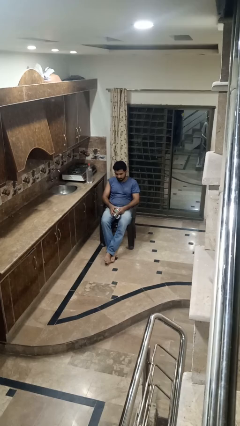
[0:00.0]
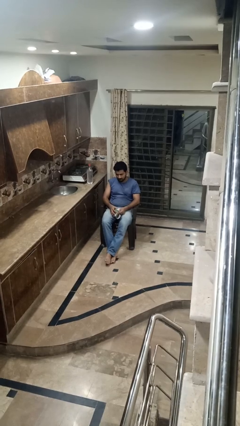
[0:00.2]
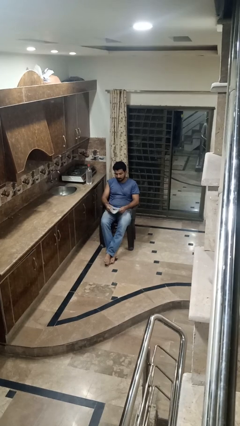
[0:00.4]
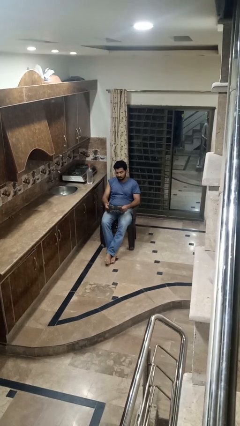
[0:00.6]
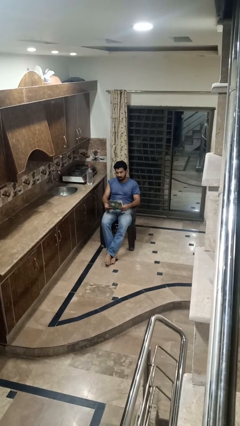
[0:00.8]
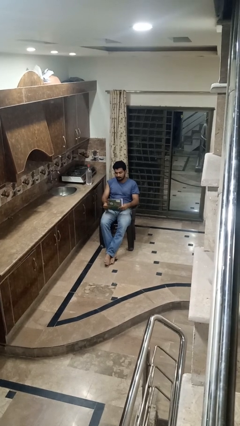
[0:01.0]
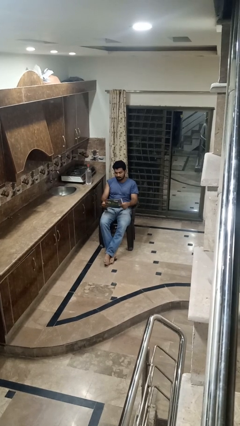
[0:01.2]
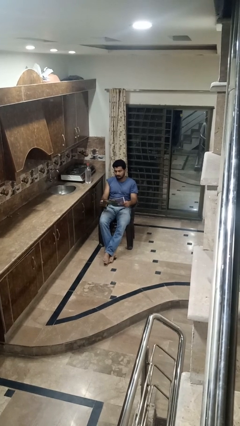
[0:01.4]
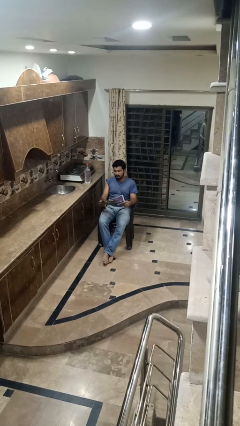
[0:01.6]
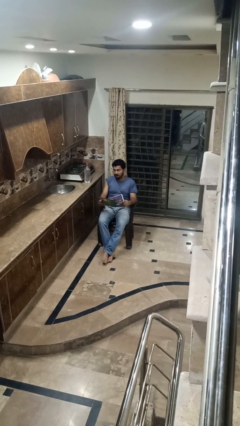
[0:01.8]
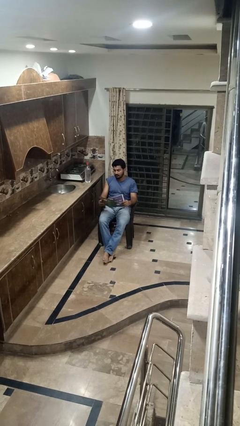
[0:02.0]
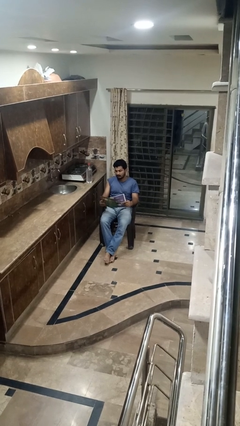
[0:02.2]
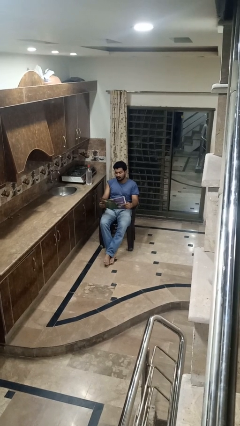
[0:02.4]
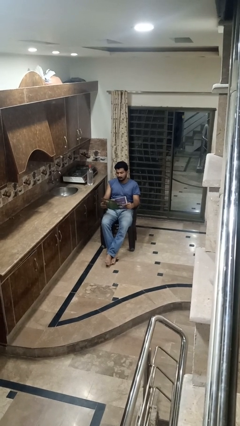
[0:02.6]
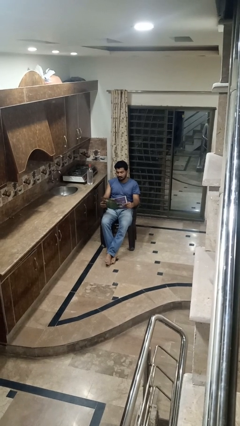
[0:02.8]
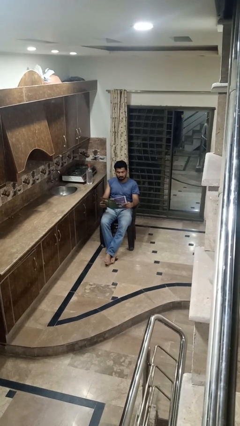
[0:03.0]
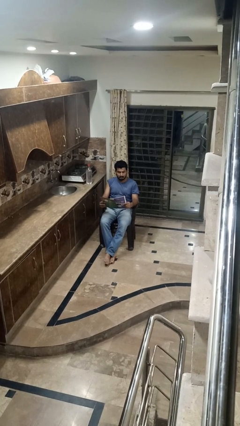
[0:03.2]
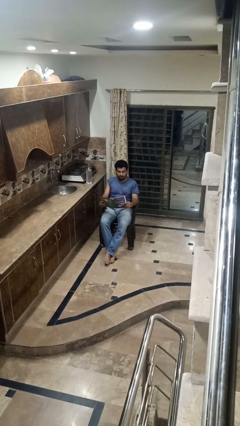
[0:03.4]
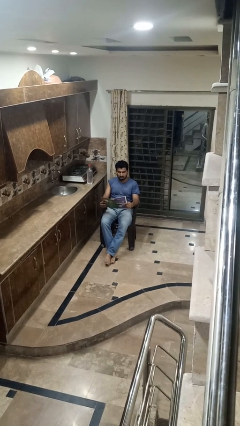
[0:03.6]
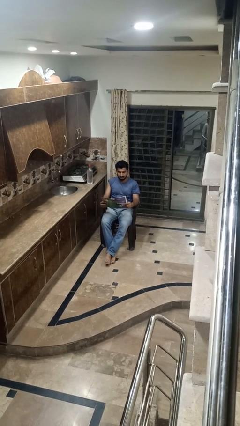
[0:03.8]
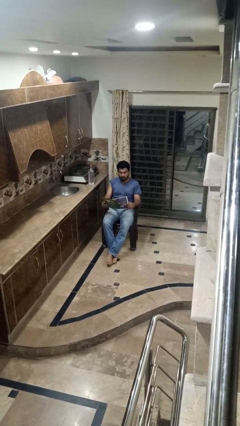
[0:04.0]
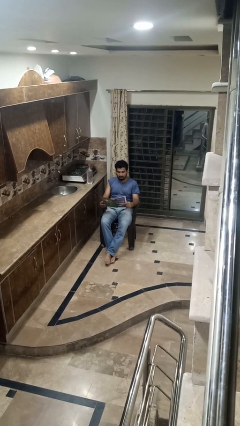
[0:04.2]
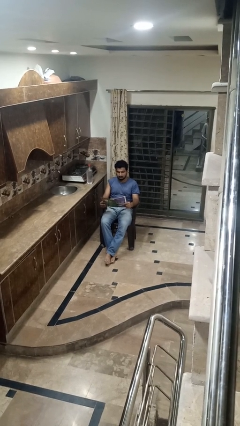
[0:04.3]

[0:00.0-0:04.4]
person reads newspaper

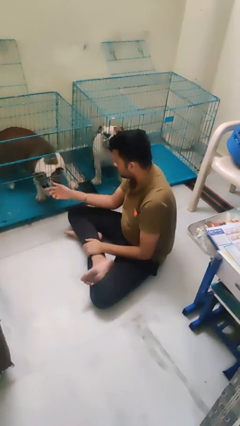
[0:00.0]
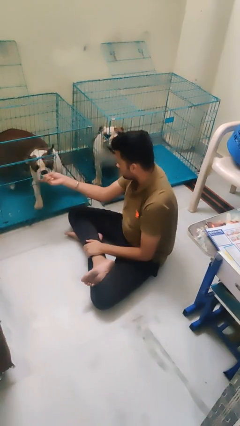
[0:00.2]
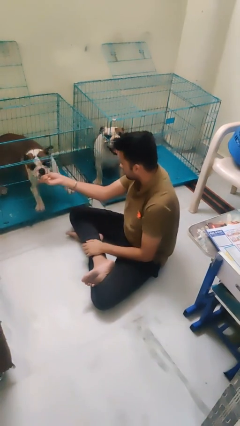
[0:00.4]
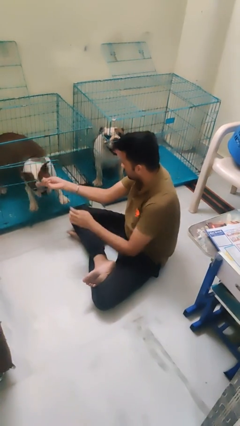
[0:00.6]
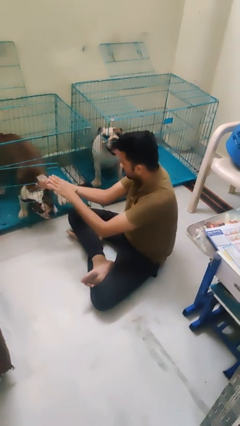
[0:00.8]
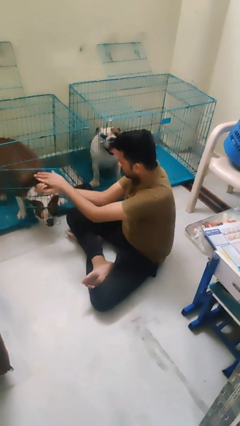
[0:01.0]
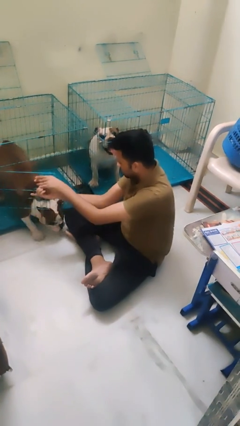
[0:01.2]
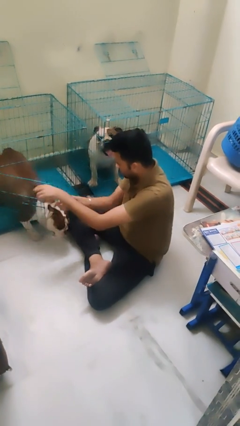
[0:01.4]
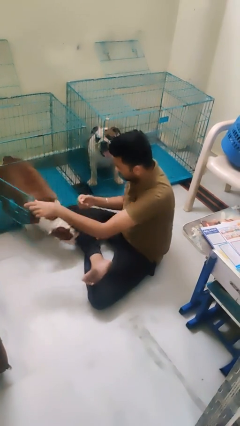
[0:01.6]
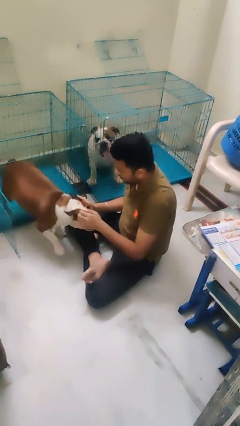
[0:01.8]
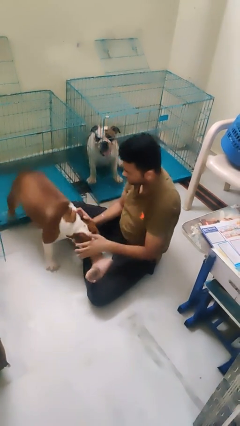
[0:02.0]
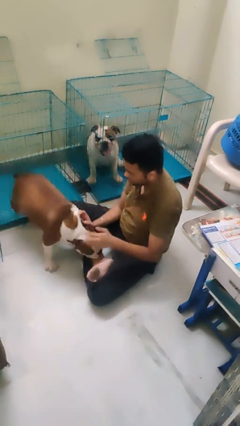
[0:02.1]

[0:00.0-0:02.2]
person uncrates dog

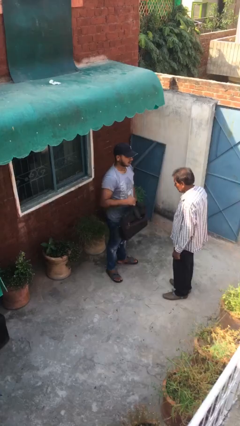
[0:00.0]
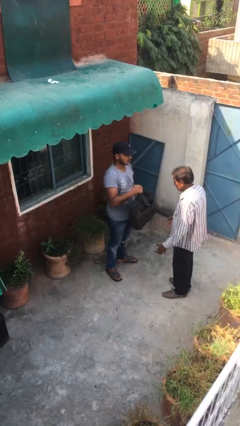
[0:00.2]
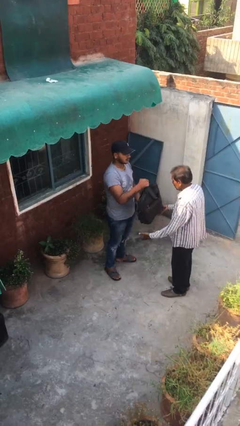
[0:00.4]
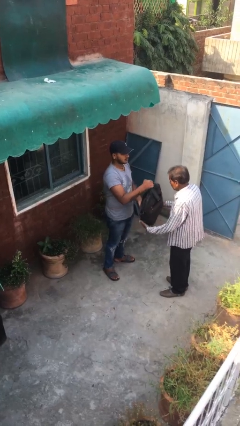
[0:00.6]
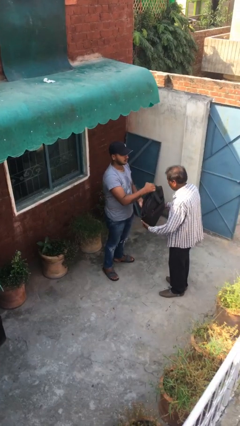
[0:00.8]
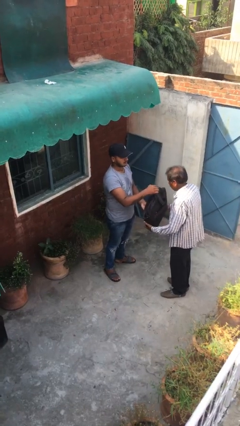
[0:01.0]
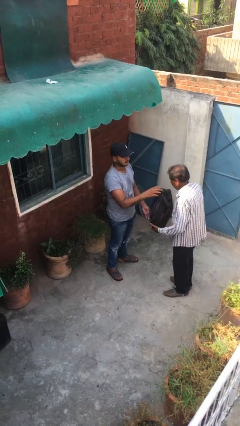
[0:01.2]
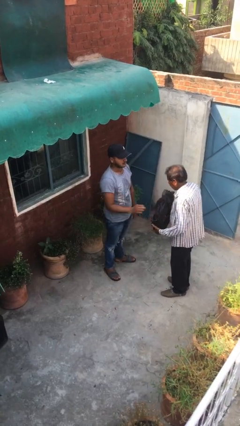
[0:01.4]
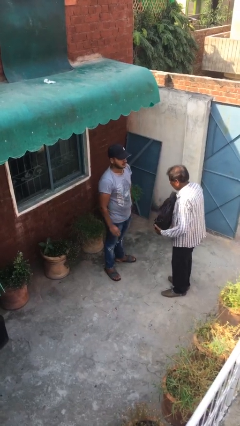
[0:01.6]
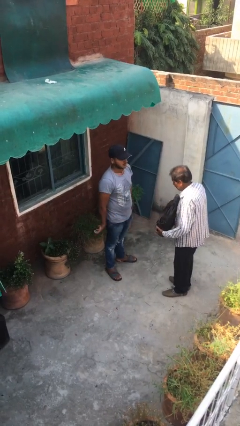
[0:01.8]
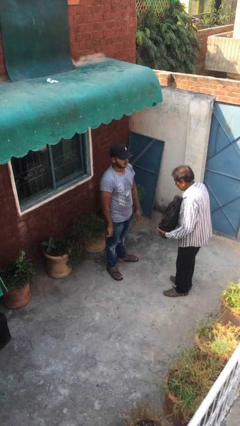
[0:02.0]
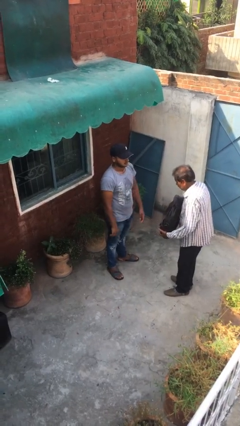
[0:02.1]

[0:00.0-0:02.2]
person transfers object to person

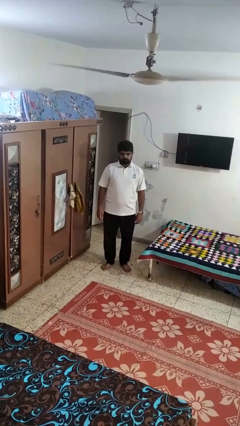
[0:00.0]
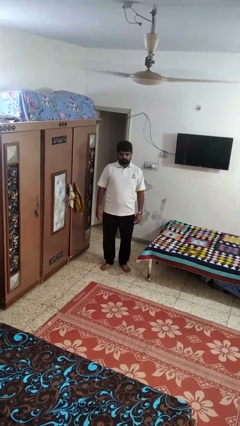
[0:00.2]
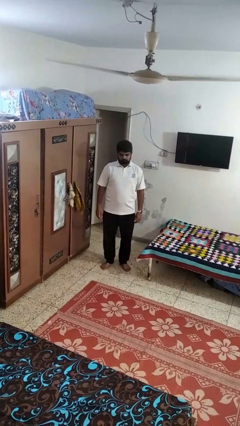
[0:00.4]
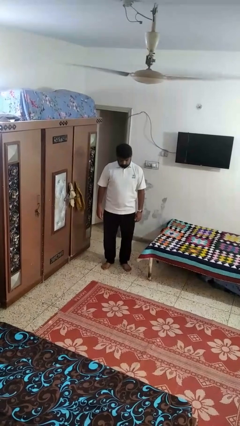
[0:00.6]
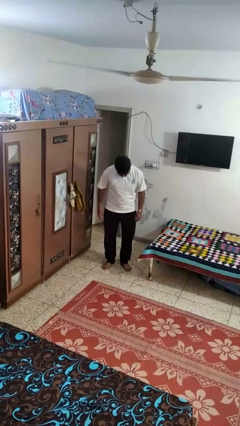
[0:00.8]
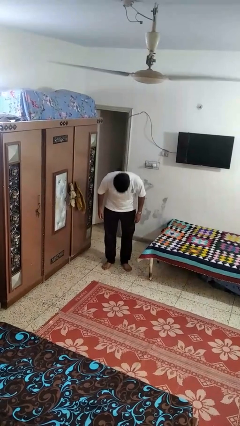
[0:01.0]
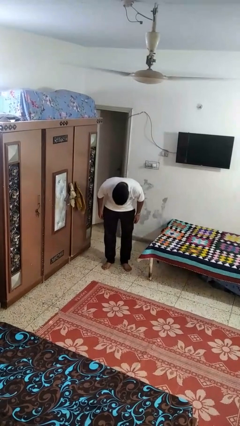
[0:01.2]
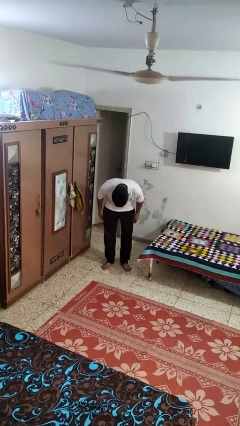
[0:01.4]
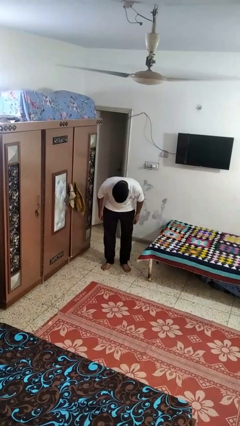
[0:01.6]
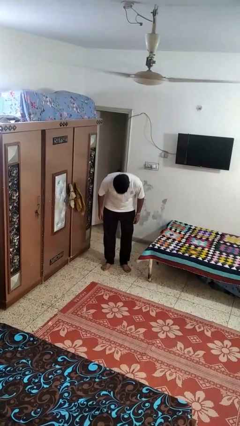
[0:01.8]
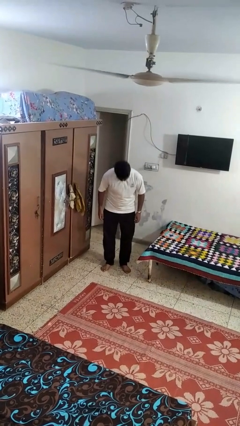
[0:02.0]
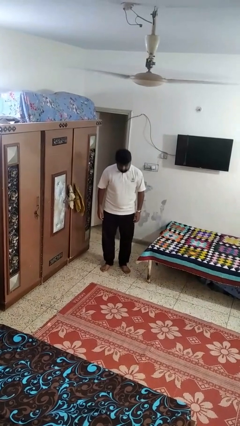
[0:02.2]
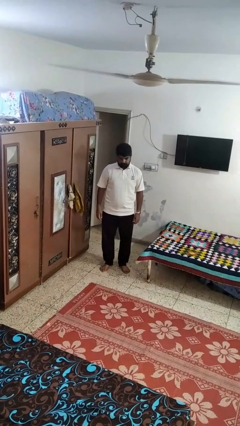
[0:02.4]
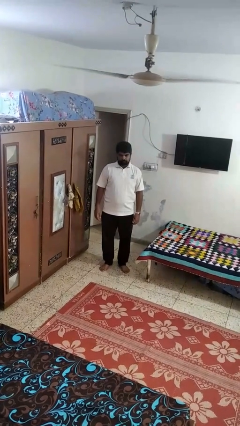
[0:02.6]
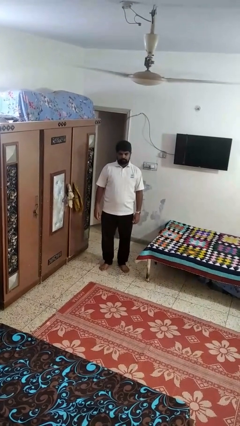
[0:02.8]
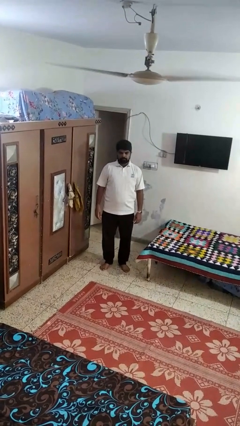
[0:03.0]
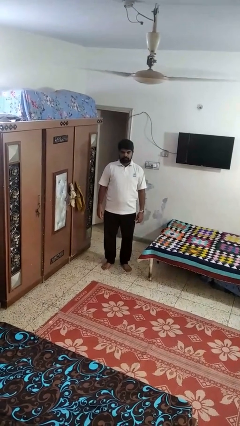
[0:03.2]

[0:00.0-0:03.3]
person bows

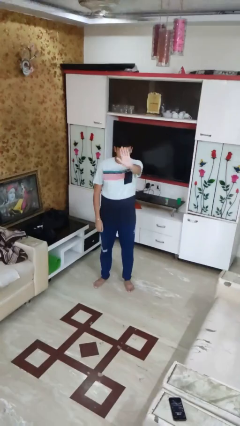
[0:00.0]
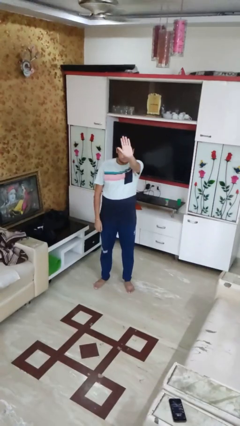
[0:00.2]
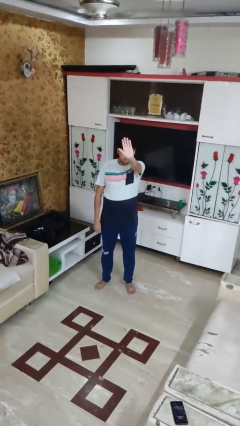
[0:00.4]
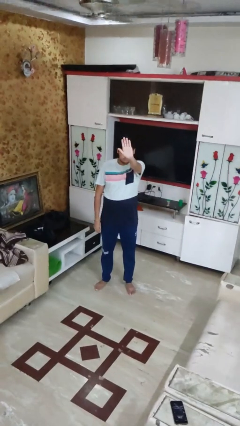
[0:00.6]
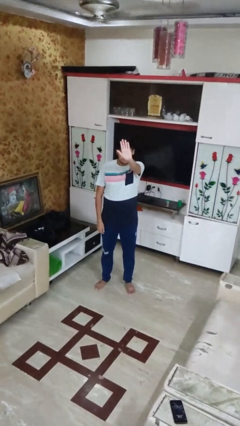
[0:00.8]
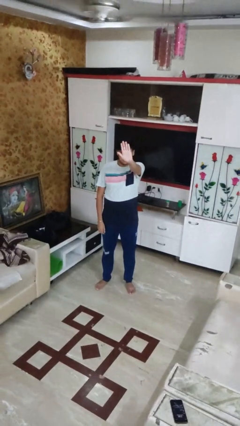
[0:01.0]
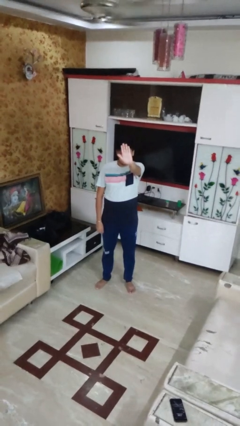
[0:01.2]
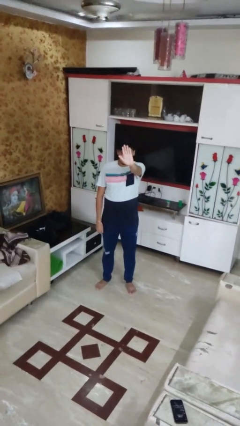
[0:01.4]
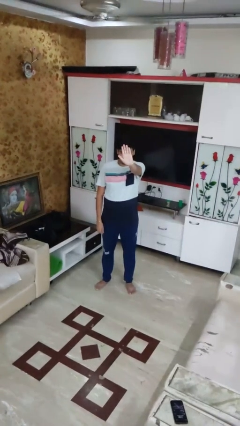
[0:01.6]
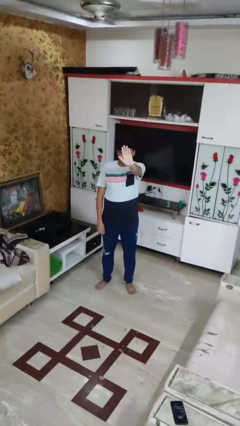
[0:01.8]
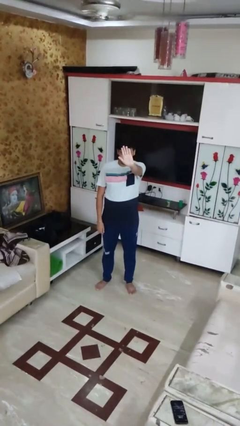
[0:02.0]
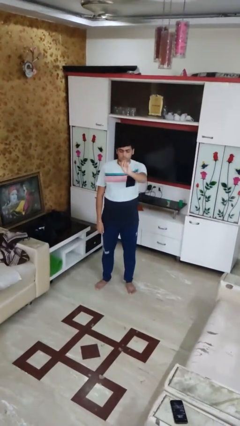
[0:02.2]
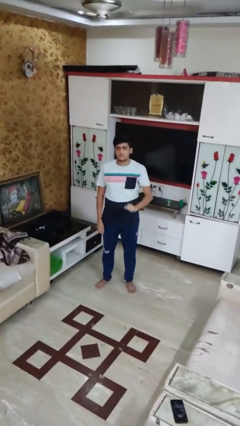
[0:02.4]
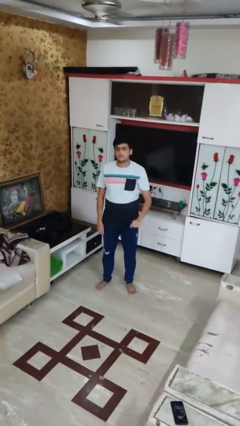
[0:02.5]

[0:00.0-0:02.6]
person gestures stop

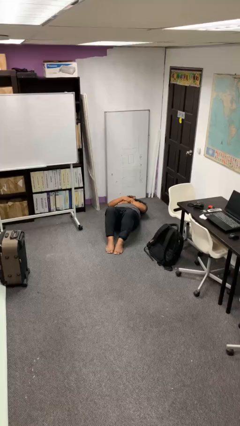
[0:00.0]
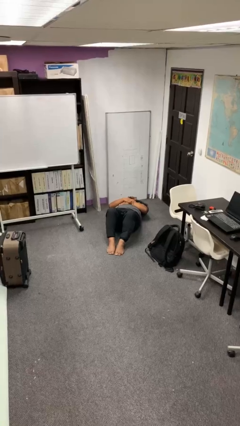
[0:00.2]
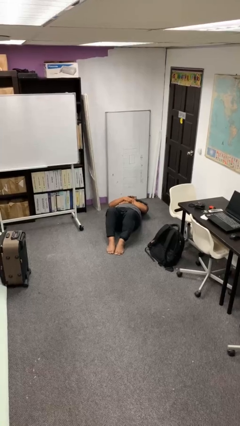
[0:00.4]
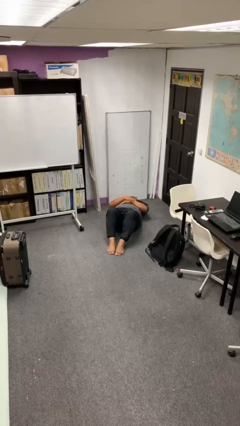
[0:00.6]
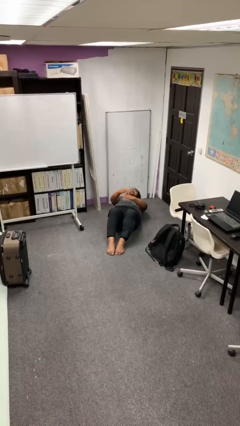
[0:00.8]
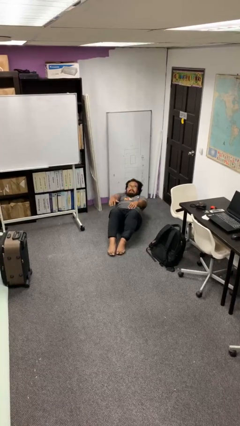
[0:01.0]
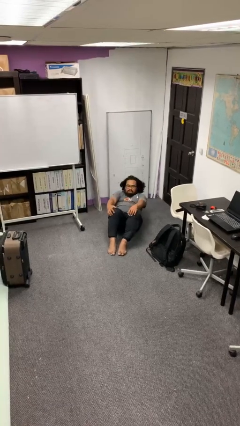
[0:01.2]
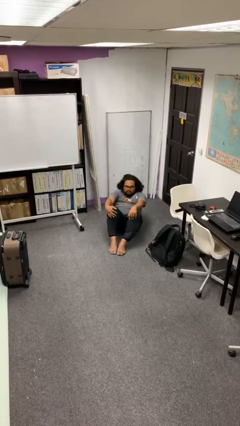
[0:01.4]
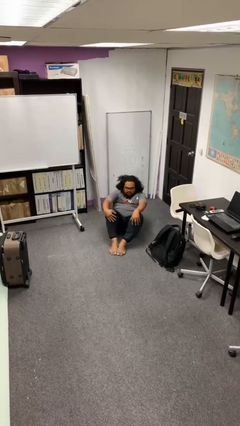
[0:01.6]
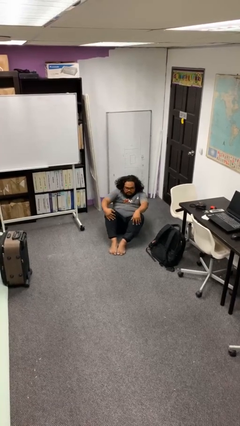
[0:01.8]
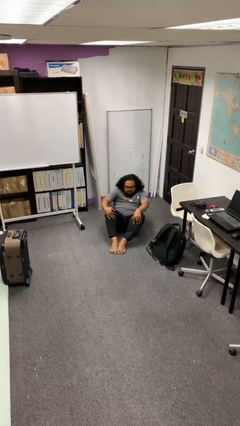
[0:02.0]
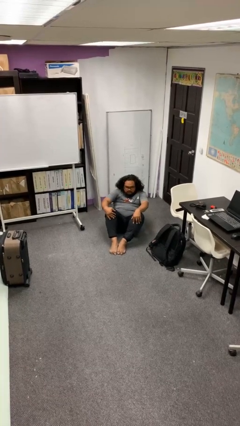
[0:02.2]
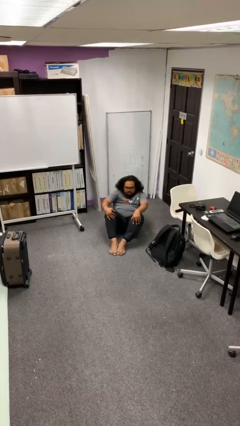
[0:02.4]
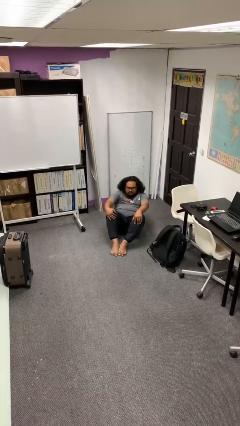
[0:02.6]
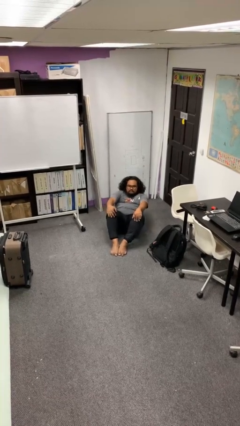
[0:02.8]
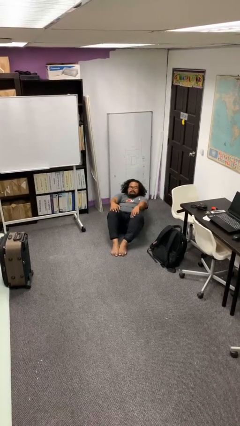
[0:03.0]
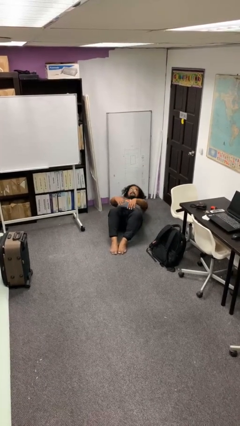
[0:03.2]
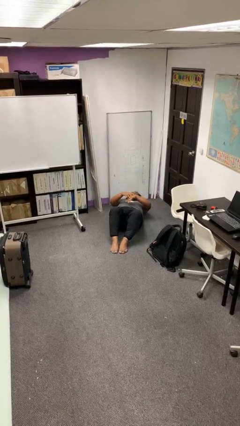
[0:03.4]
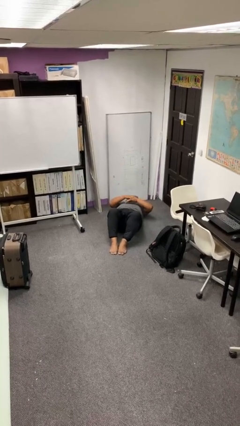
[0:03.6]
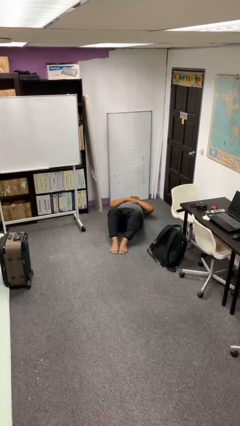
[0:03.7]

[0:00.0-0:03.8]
person exercises with situp
